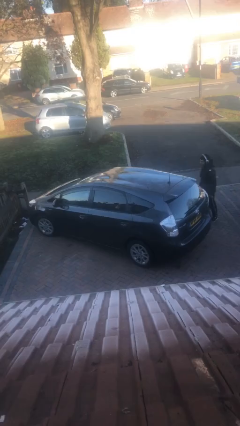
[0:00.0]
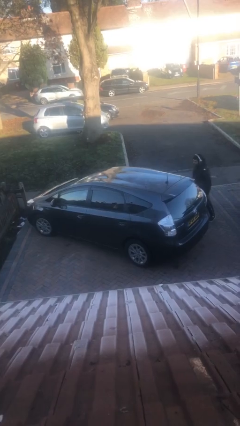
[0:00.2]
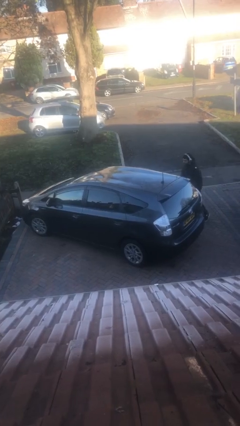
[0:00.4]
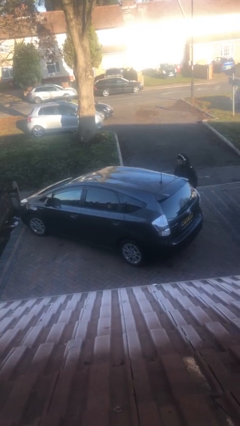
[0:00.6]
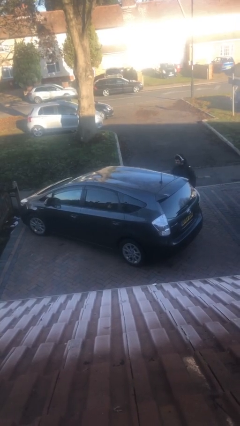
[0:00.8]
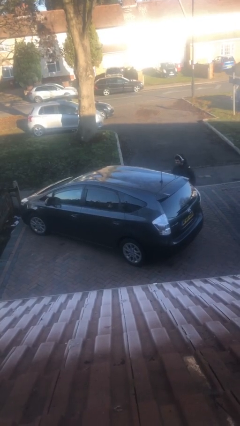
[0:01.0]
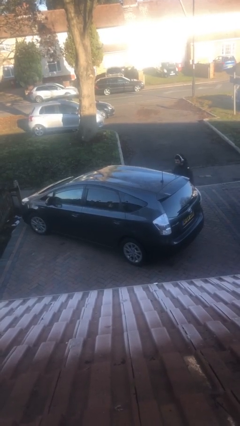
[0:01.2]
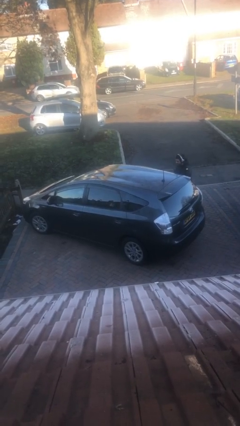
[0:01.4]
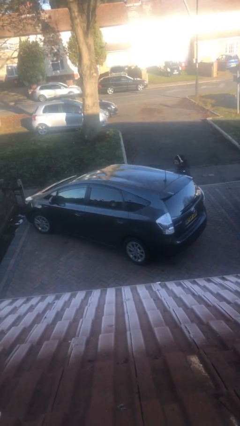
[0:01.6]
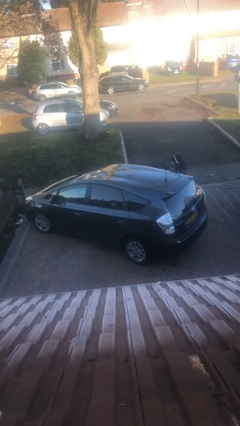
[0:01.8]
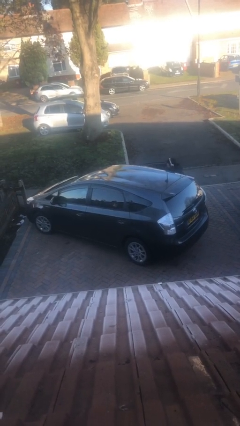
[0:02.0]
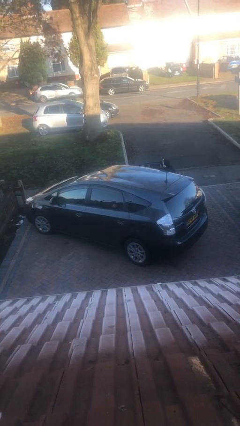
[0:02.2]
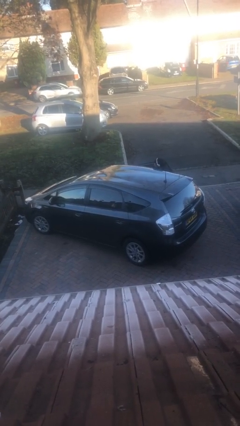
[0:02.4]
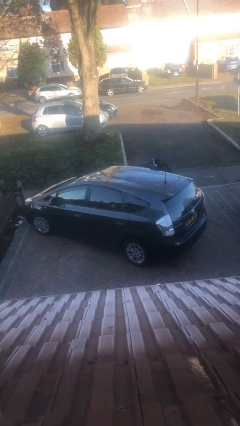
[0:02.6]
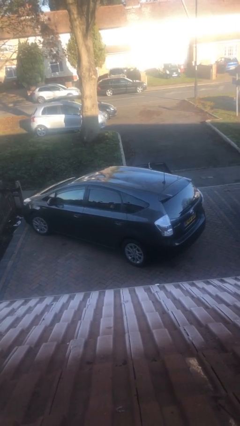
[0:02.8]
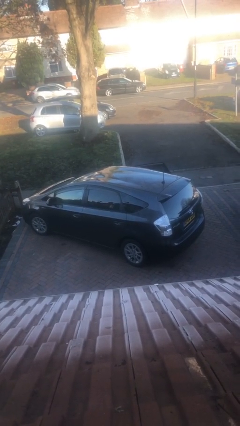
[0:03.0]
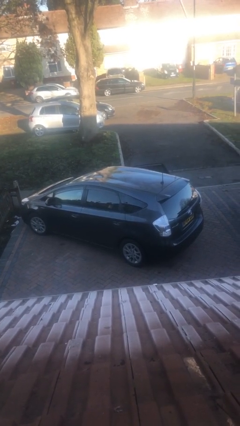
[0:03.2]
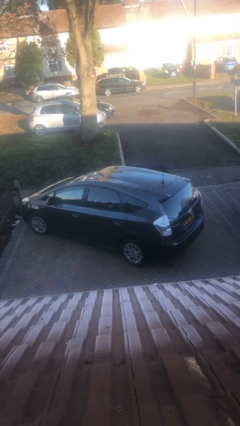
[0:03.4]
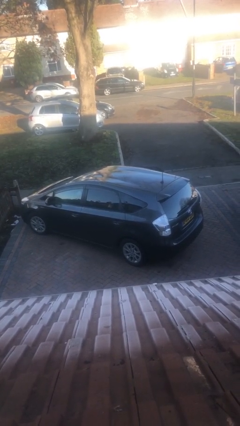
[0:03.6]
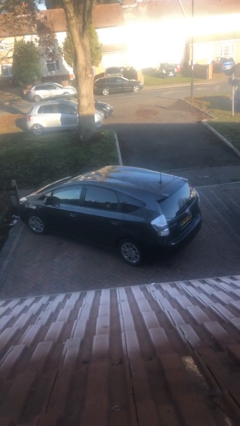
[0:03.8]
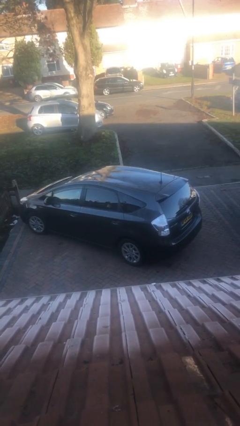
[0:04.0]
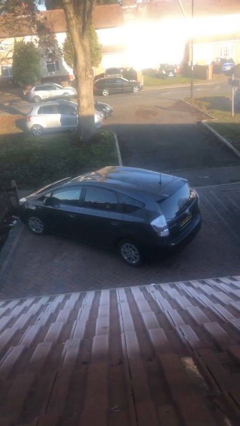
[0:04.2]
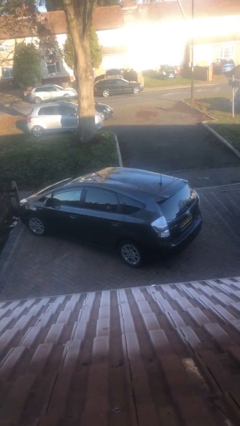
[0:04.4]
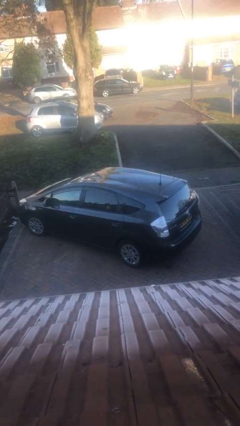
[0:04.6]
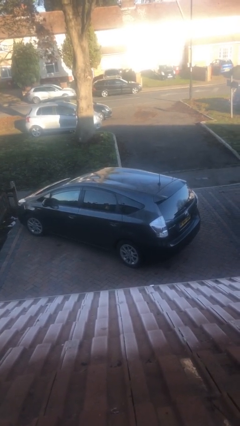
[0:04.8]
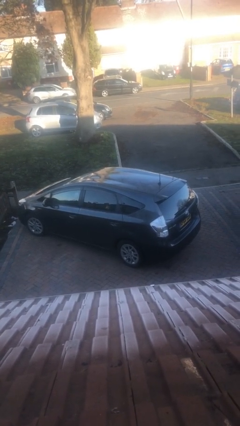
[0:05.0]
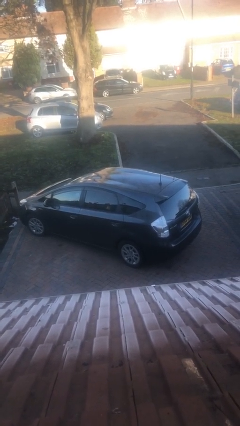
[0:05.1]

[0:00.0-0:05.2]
car picks up person

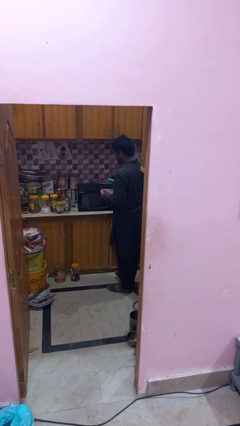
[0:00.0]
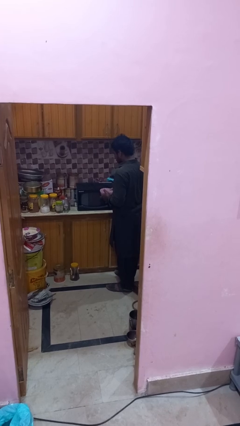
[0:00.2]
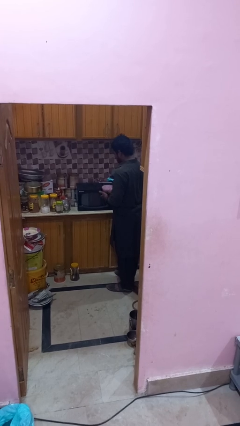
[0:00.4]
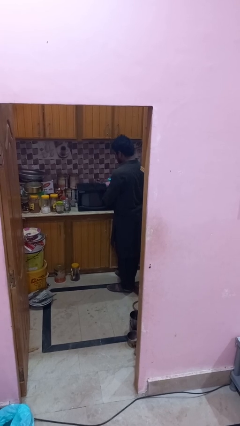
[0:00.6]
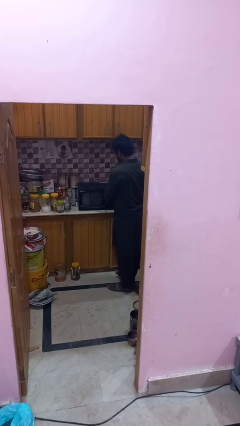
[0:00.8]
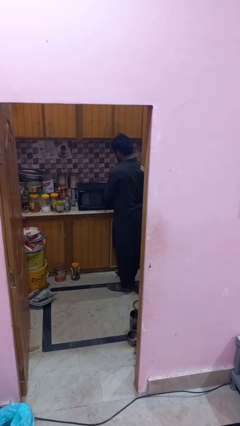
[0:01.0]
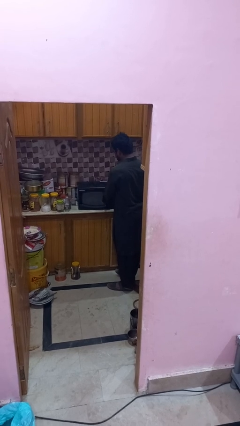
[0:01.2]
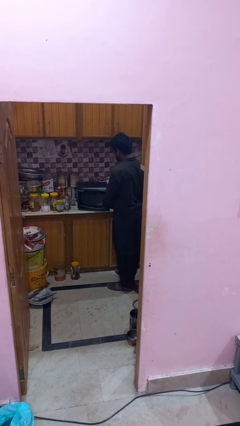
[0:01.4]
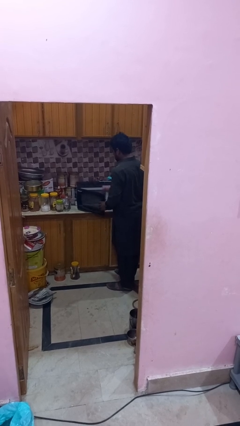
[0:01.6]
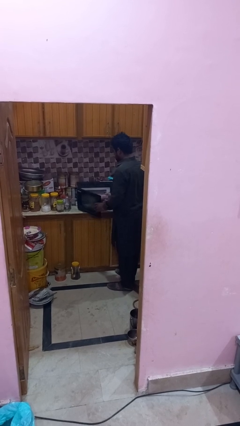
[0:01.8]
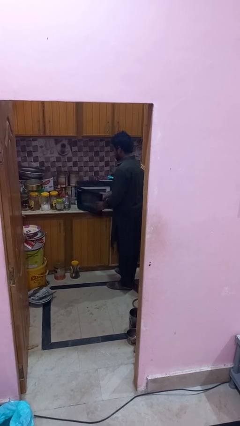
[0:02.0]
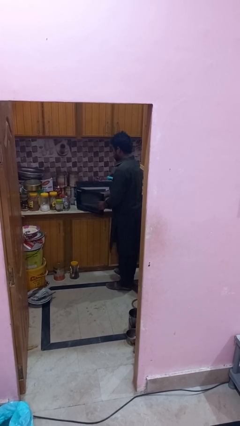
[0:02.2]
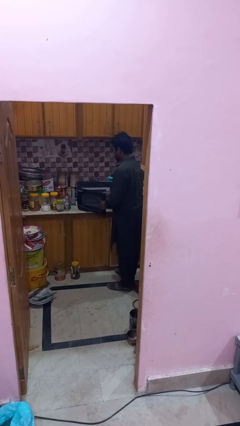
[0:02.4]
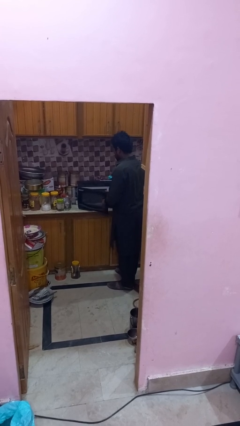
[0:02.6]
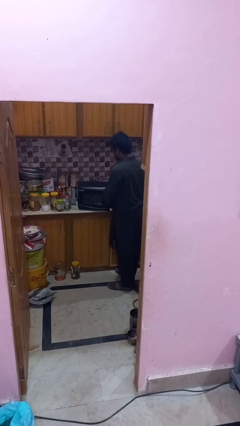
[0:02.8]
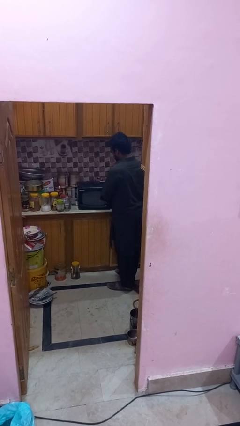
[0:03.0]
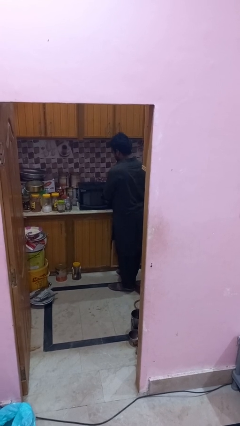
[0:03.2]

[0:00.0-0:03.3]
person puts object into microwave

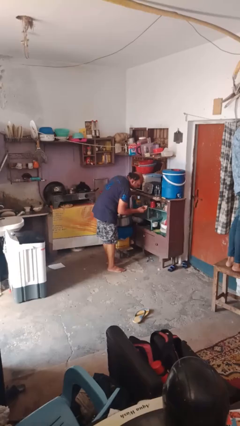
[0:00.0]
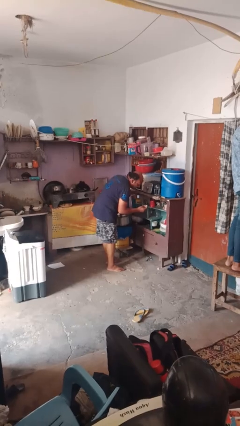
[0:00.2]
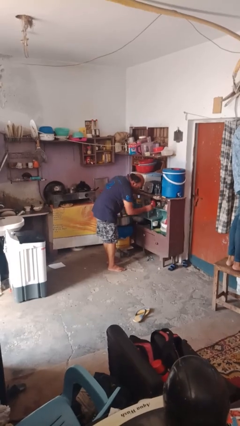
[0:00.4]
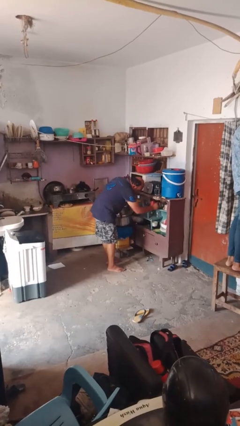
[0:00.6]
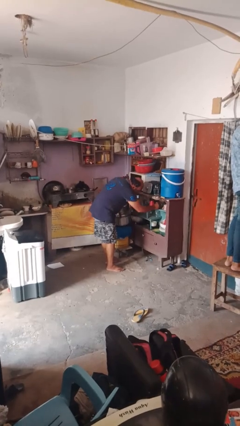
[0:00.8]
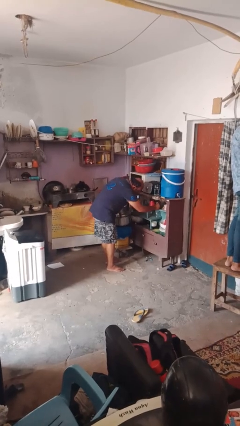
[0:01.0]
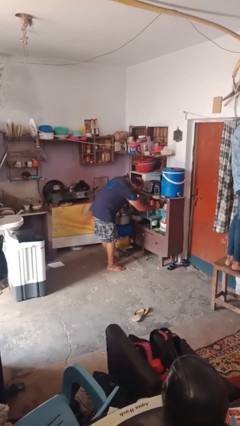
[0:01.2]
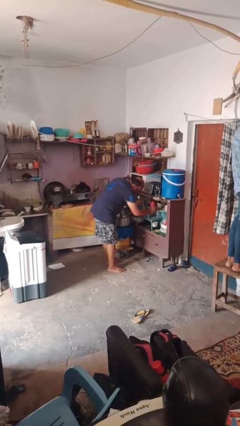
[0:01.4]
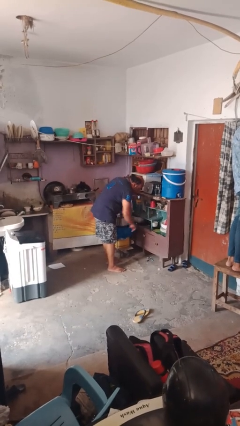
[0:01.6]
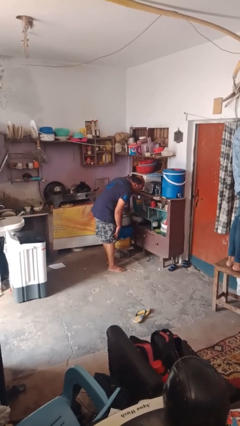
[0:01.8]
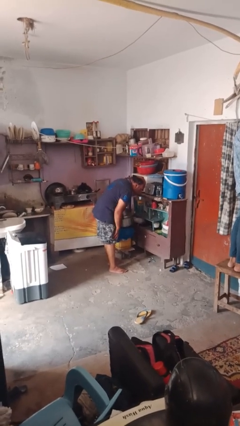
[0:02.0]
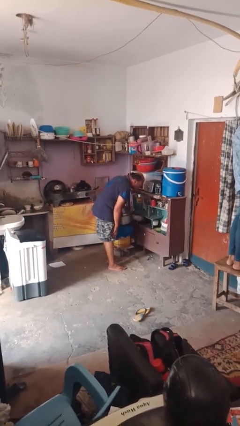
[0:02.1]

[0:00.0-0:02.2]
person puts object into kitchen drawer

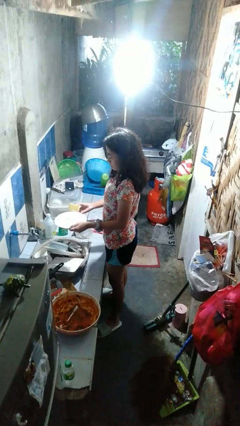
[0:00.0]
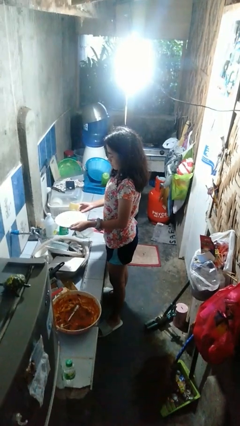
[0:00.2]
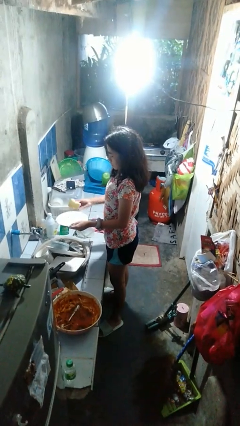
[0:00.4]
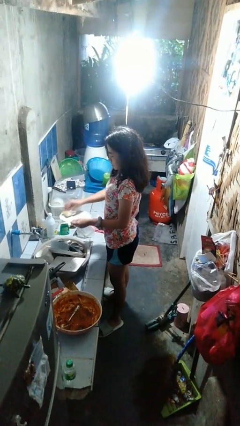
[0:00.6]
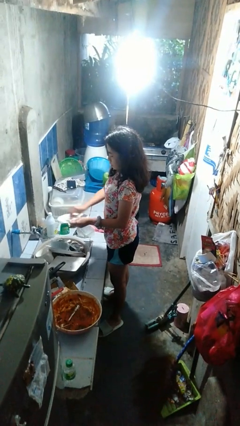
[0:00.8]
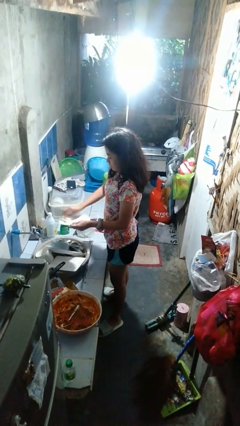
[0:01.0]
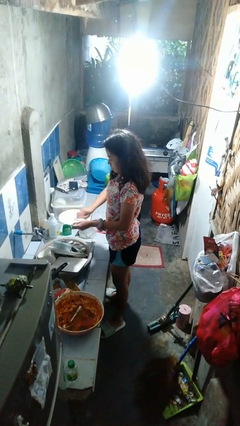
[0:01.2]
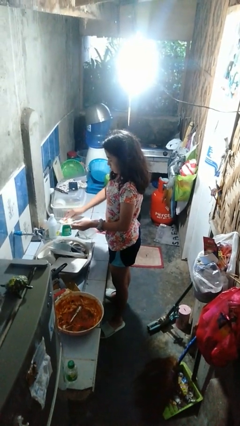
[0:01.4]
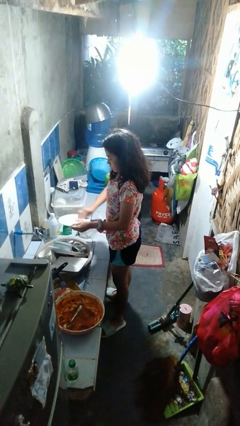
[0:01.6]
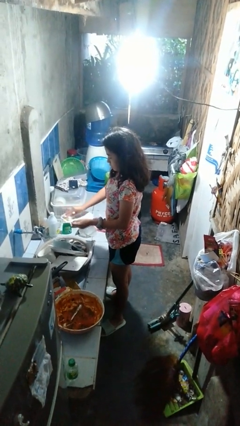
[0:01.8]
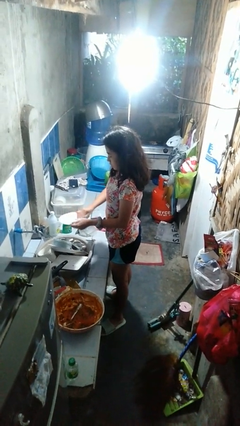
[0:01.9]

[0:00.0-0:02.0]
person washes dish

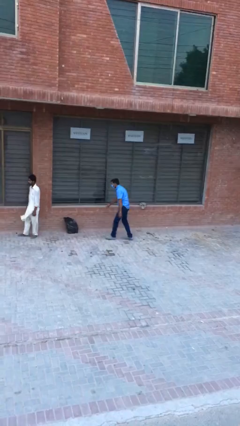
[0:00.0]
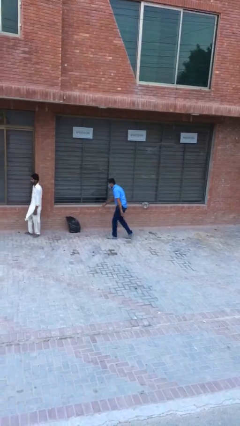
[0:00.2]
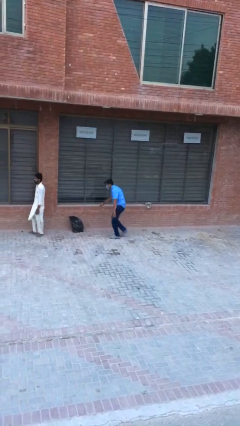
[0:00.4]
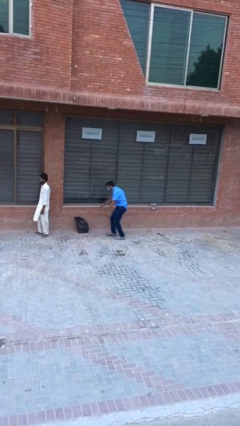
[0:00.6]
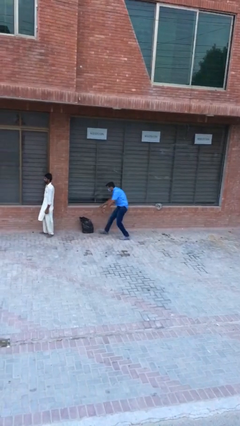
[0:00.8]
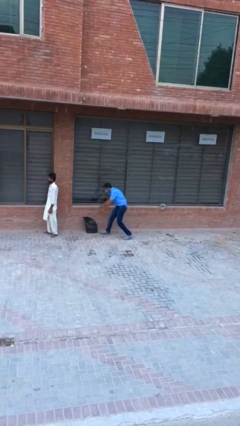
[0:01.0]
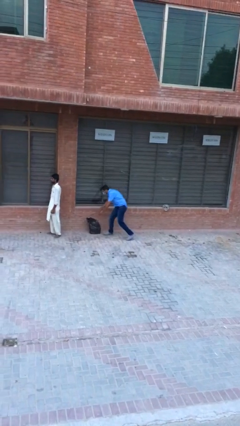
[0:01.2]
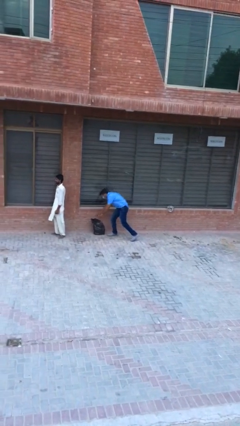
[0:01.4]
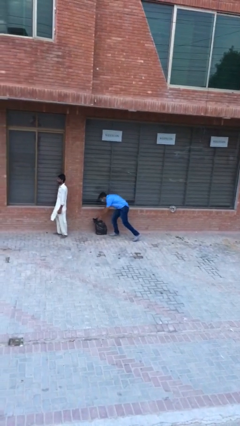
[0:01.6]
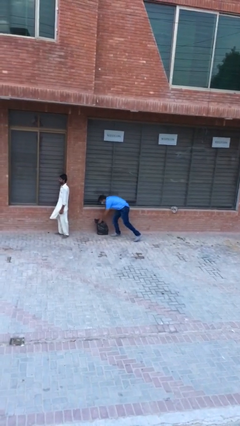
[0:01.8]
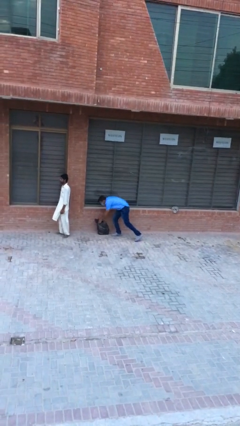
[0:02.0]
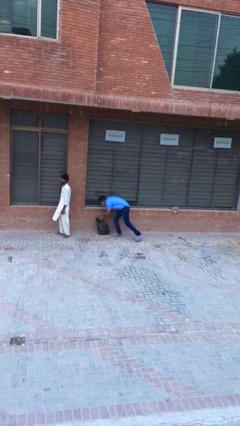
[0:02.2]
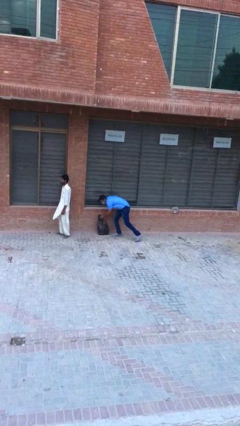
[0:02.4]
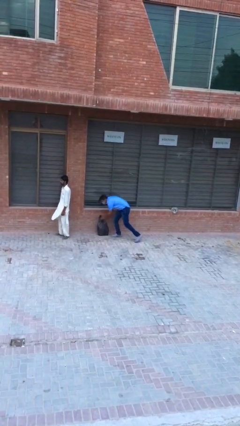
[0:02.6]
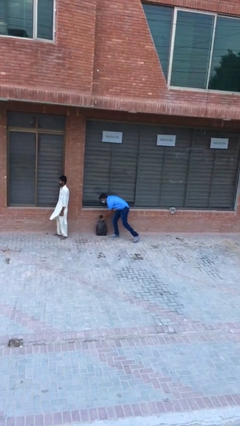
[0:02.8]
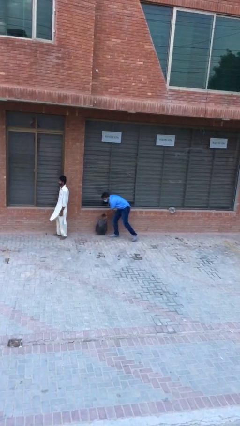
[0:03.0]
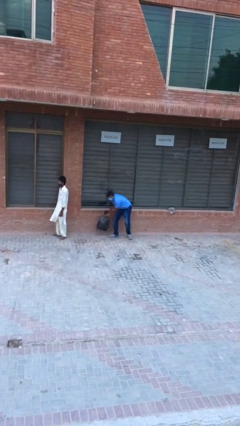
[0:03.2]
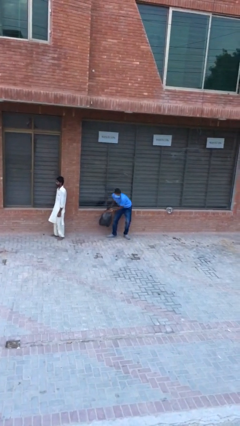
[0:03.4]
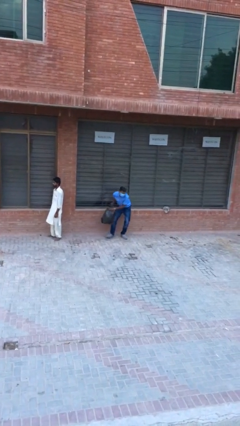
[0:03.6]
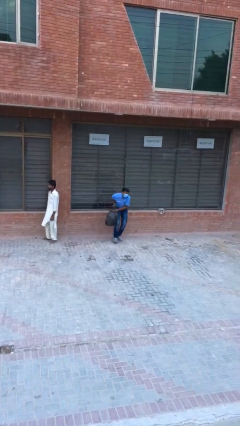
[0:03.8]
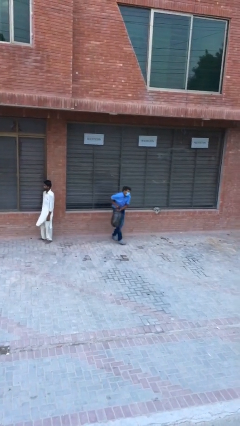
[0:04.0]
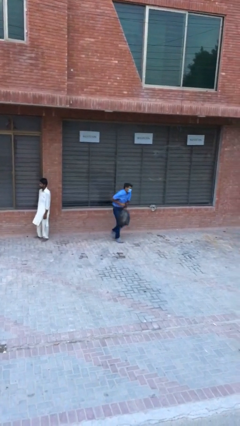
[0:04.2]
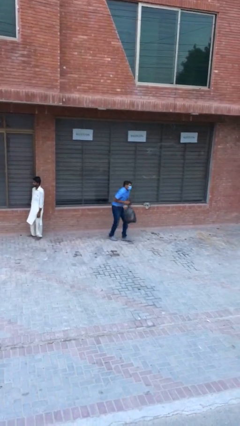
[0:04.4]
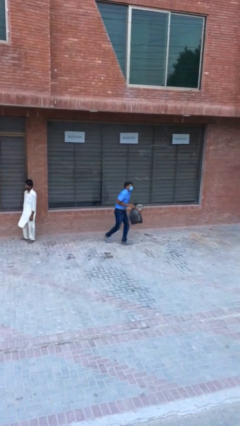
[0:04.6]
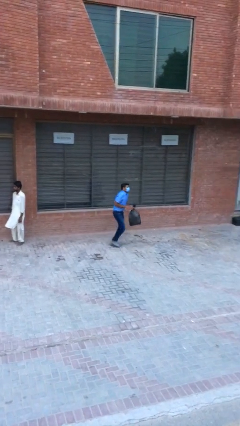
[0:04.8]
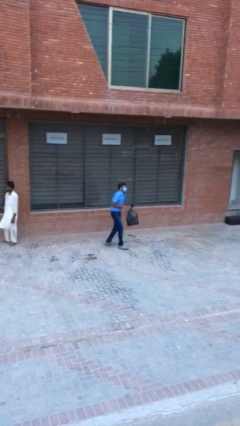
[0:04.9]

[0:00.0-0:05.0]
person steals object from person
